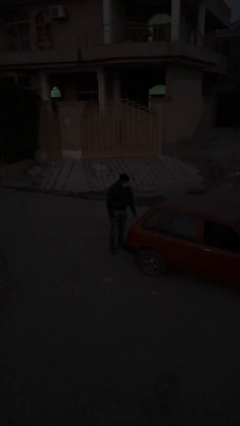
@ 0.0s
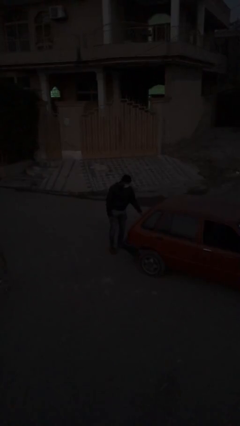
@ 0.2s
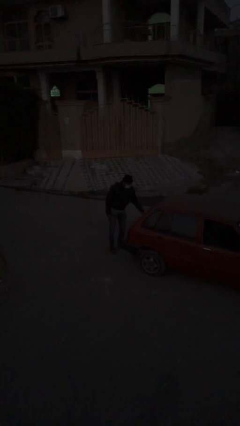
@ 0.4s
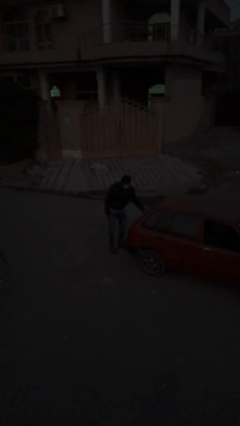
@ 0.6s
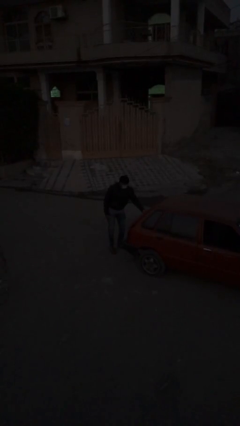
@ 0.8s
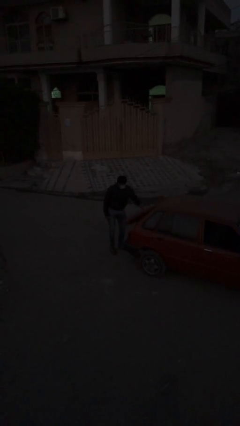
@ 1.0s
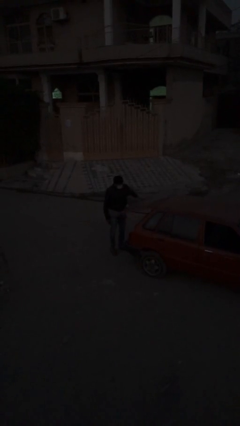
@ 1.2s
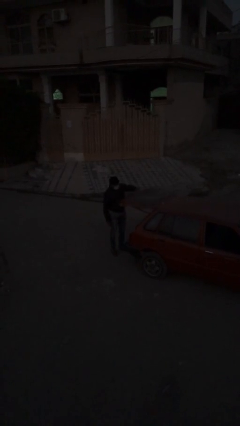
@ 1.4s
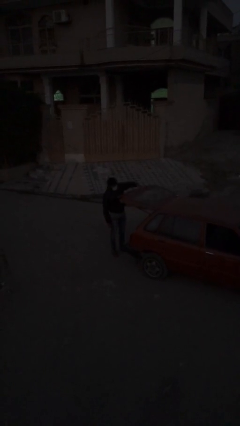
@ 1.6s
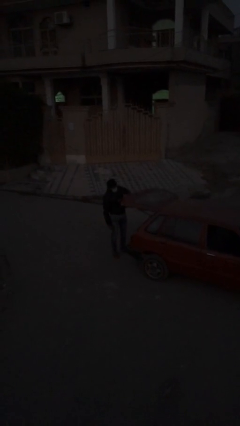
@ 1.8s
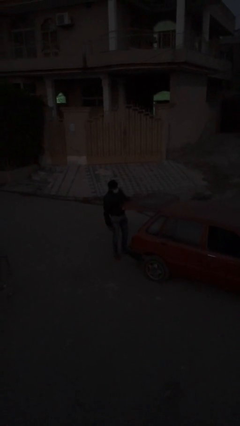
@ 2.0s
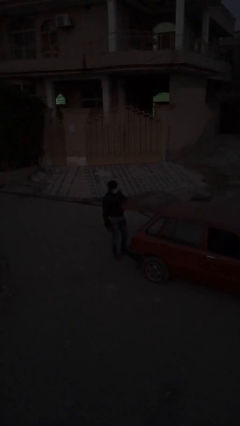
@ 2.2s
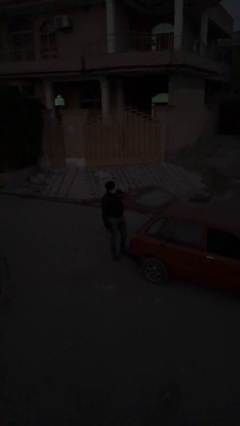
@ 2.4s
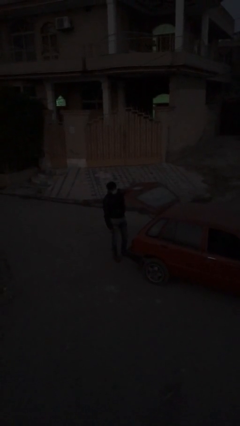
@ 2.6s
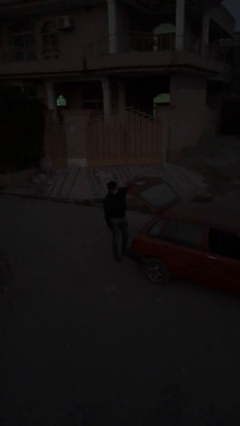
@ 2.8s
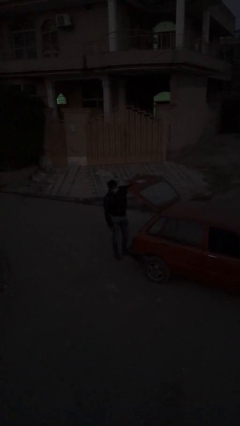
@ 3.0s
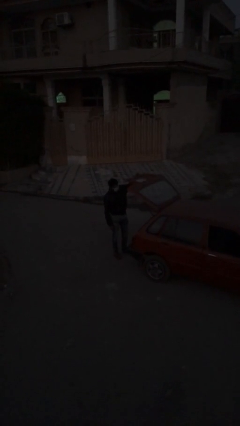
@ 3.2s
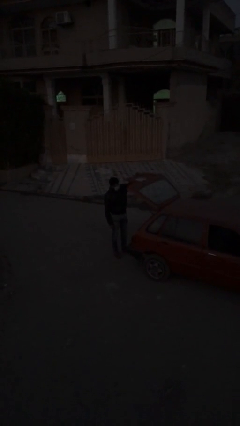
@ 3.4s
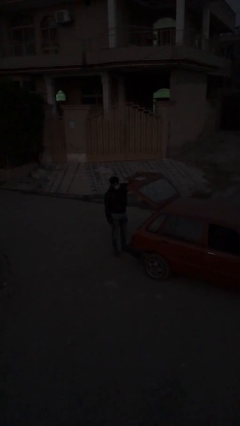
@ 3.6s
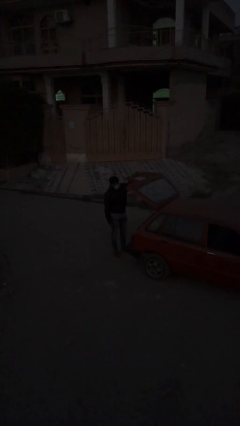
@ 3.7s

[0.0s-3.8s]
person opens car trunk

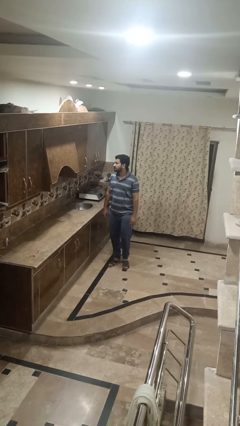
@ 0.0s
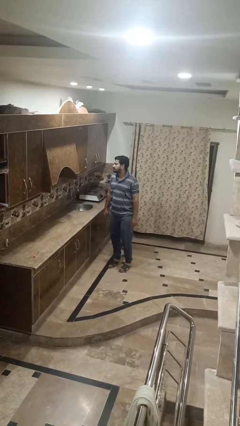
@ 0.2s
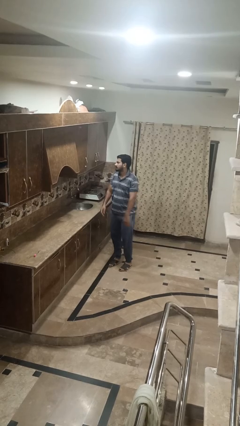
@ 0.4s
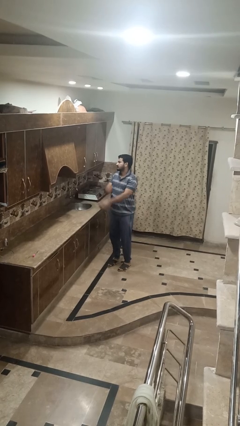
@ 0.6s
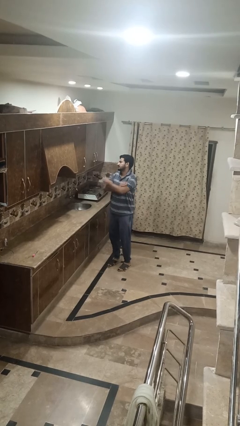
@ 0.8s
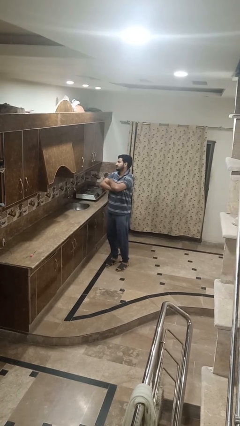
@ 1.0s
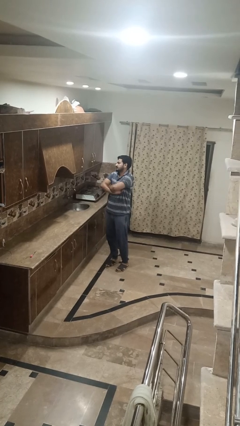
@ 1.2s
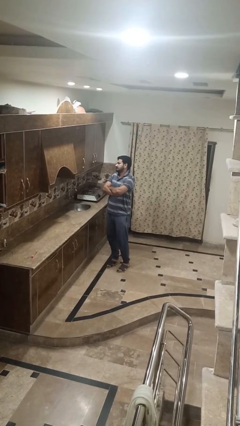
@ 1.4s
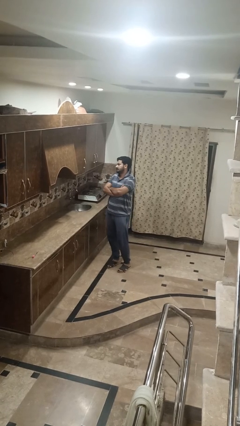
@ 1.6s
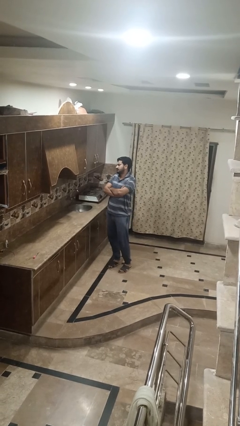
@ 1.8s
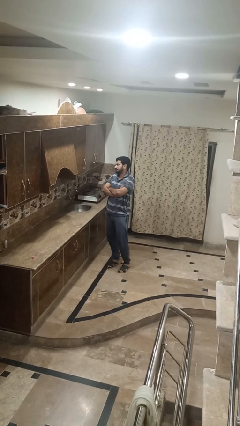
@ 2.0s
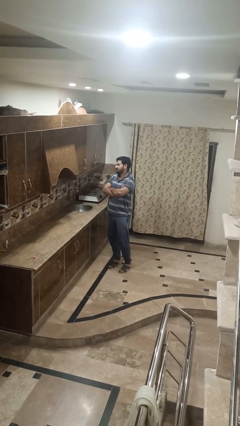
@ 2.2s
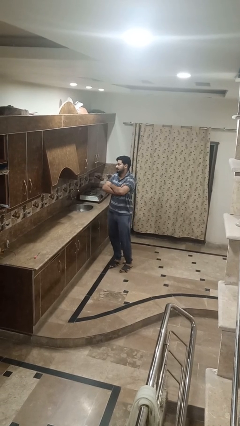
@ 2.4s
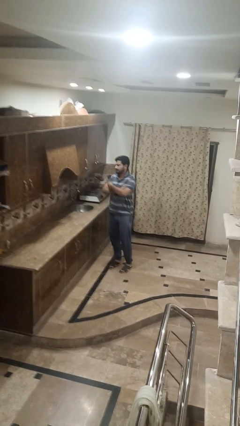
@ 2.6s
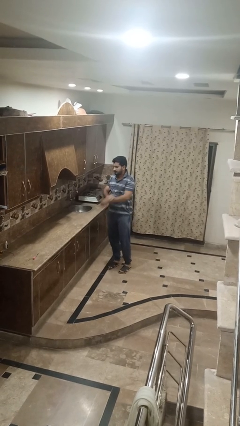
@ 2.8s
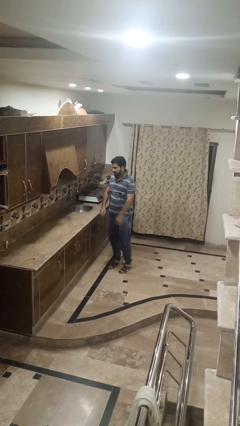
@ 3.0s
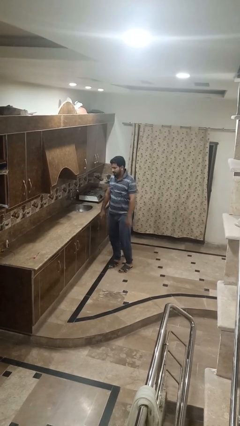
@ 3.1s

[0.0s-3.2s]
person crosses arms

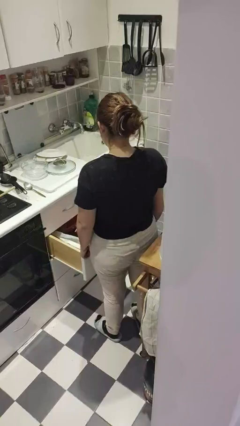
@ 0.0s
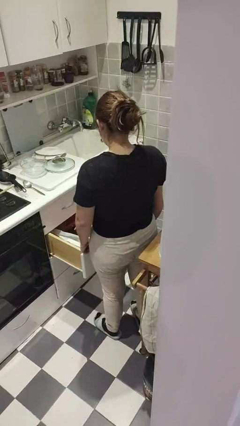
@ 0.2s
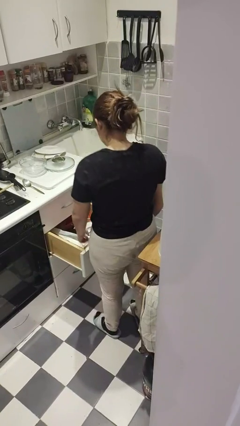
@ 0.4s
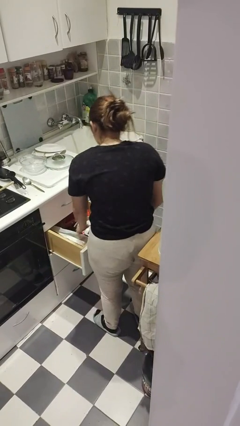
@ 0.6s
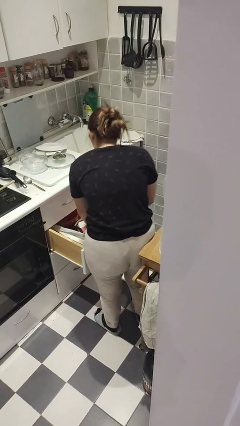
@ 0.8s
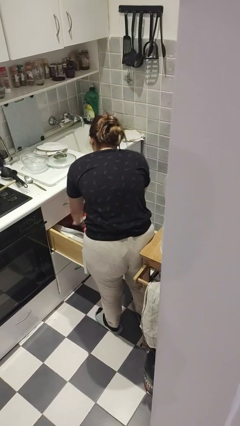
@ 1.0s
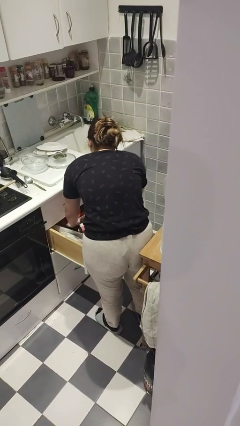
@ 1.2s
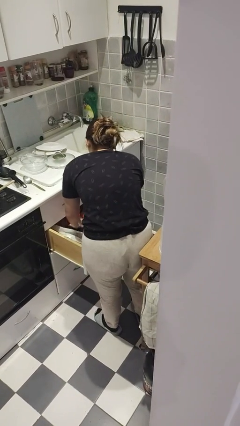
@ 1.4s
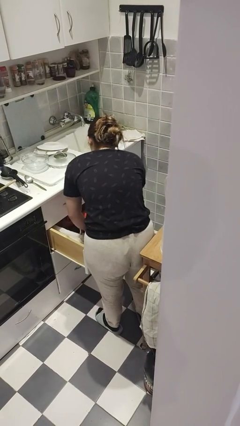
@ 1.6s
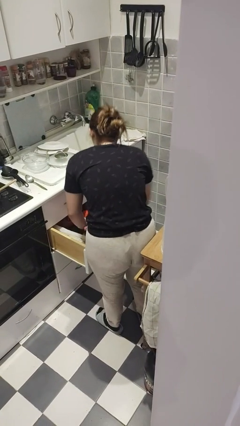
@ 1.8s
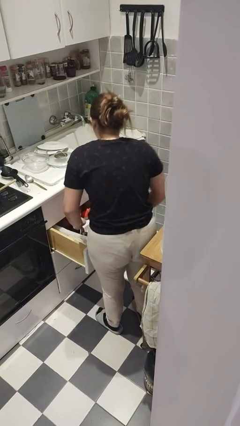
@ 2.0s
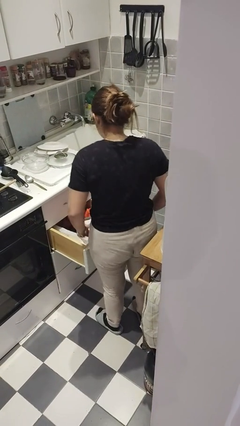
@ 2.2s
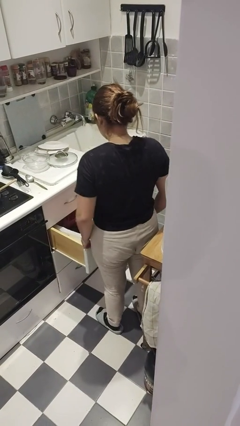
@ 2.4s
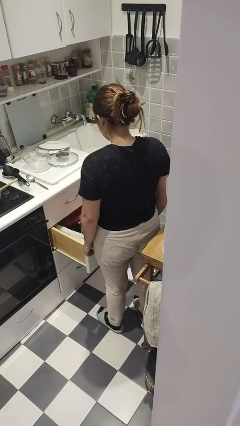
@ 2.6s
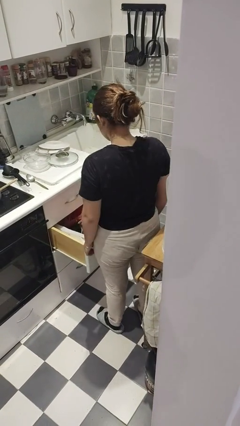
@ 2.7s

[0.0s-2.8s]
person searches in kitchen drawer

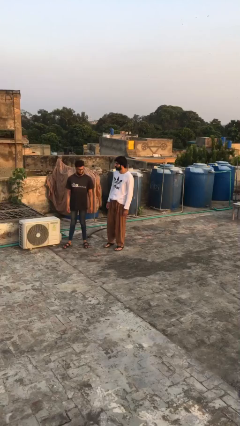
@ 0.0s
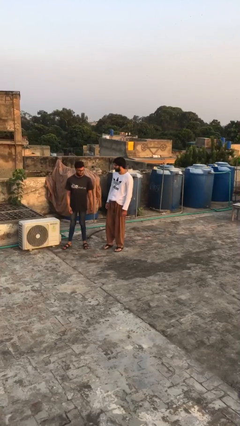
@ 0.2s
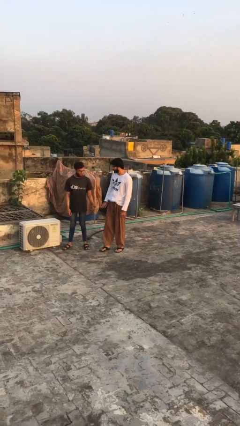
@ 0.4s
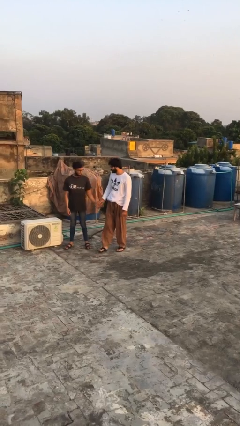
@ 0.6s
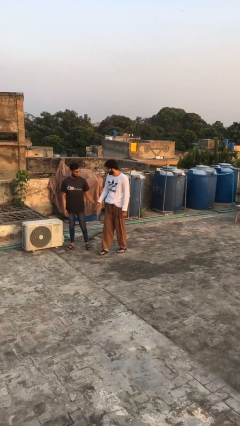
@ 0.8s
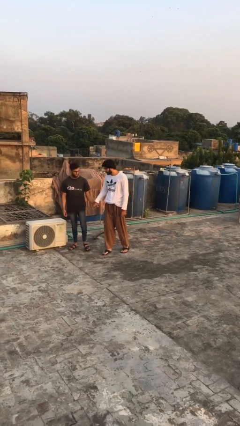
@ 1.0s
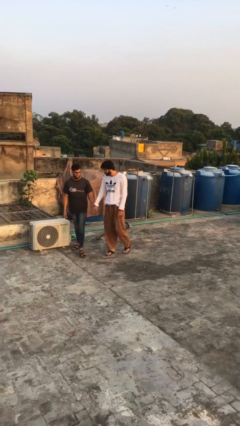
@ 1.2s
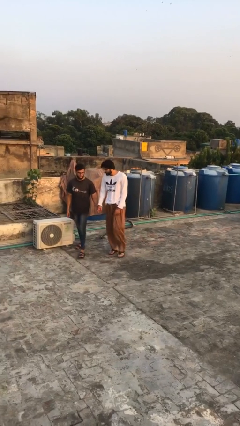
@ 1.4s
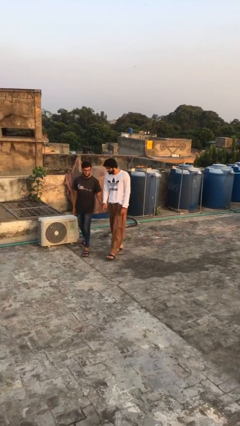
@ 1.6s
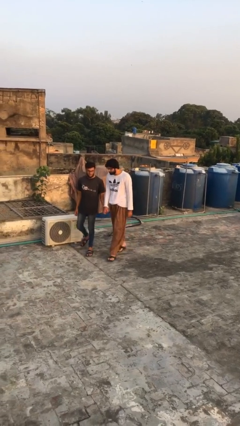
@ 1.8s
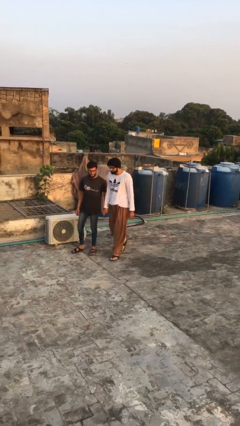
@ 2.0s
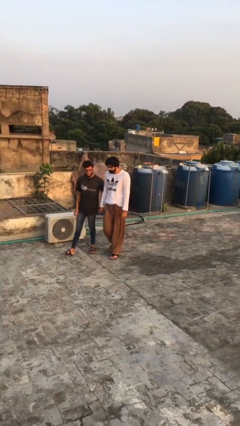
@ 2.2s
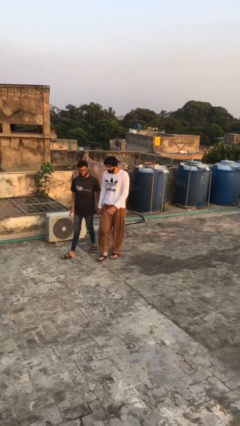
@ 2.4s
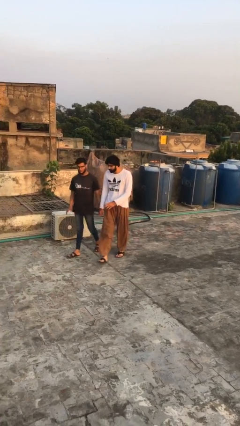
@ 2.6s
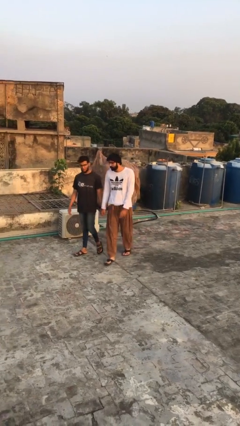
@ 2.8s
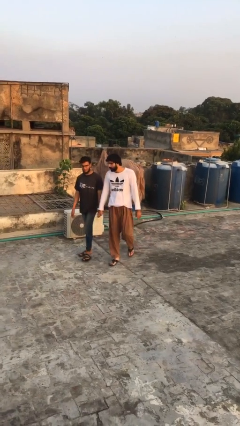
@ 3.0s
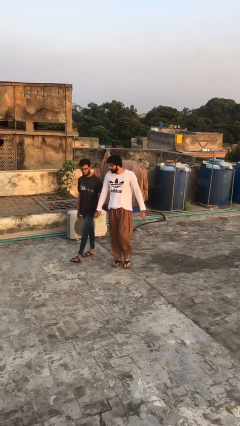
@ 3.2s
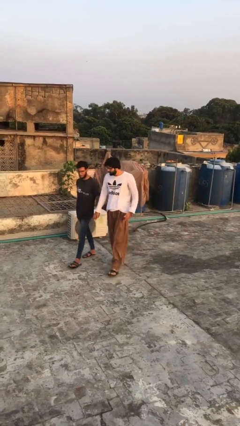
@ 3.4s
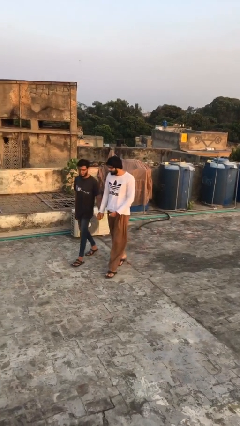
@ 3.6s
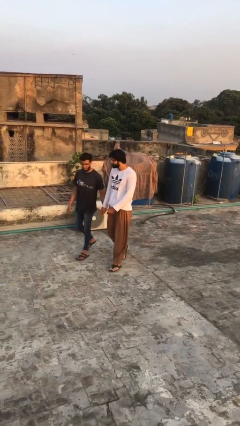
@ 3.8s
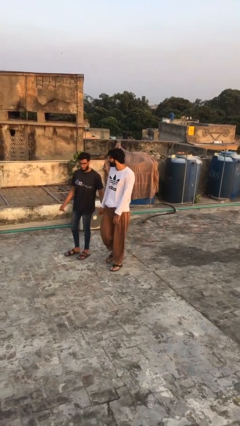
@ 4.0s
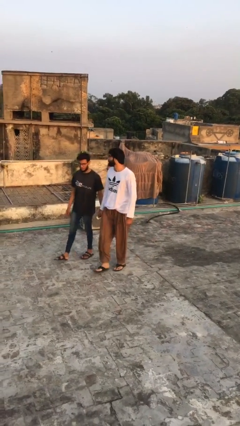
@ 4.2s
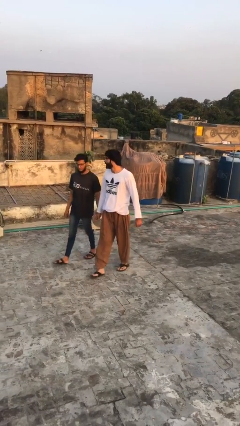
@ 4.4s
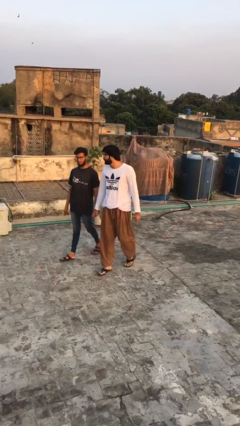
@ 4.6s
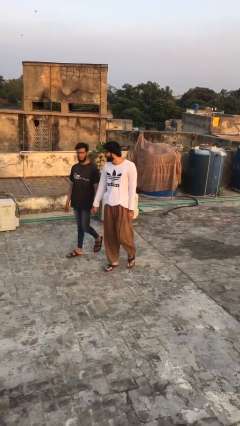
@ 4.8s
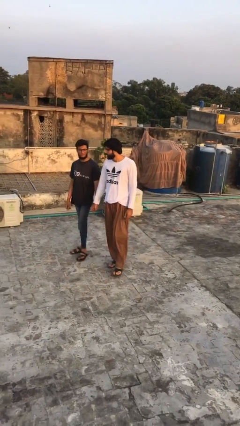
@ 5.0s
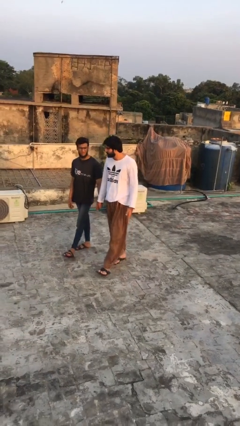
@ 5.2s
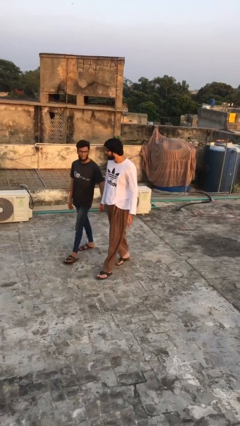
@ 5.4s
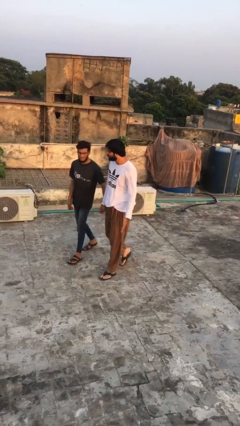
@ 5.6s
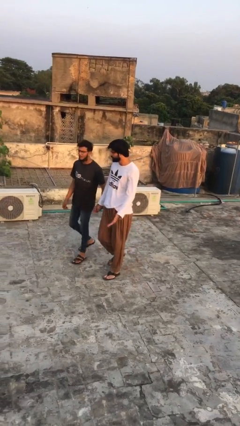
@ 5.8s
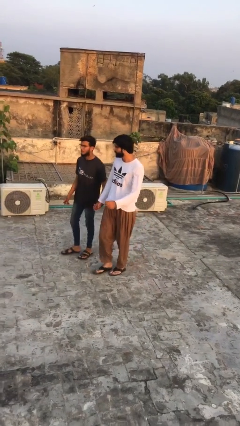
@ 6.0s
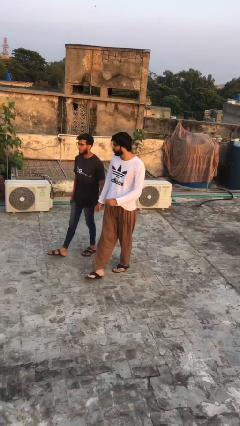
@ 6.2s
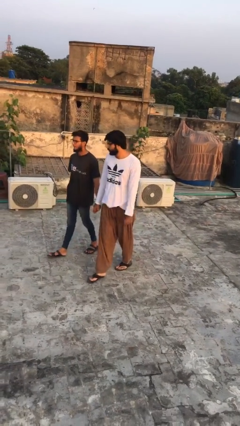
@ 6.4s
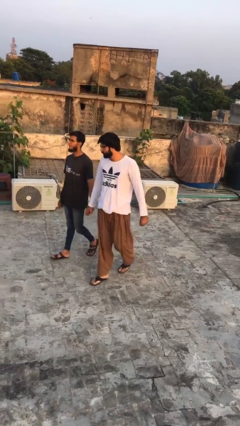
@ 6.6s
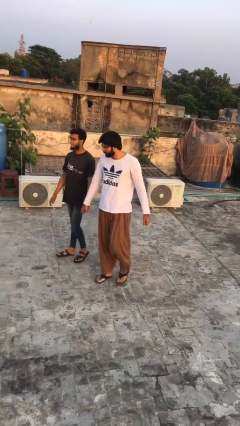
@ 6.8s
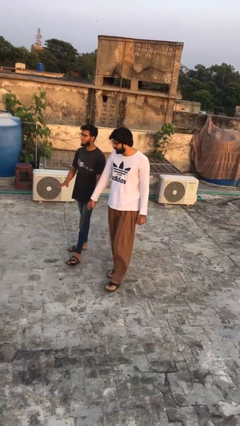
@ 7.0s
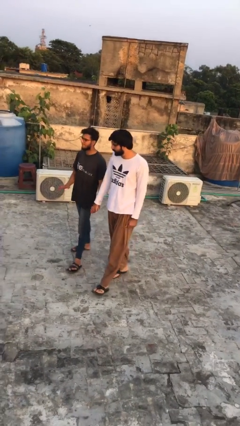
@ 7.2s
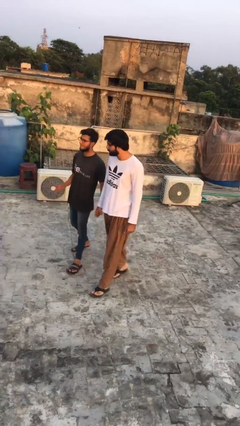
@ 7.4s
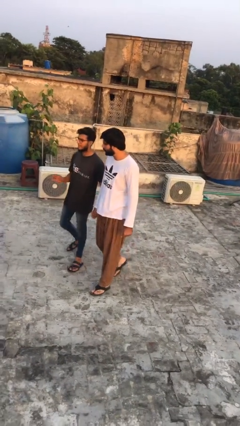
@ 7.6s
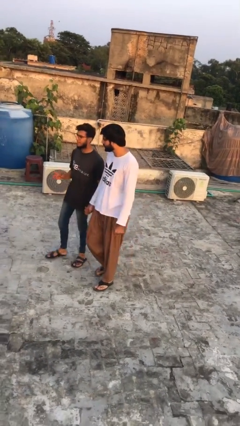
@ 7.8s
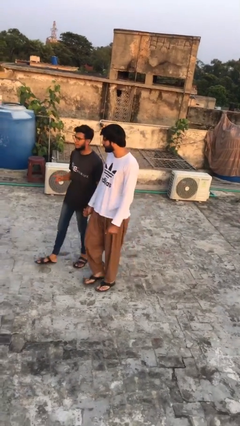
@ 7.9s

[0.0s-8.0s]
person holds hand

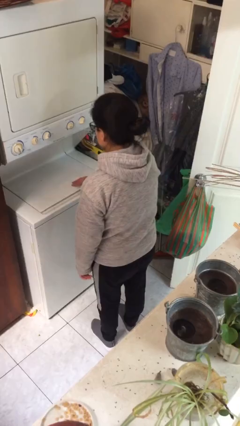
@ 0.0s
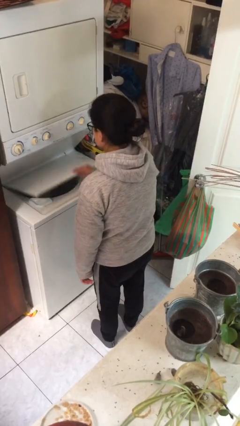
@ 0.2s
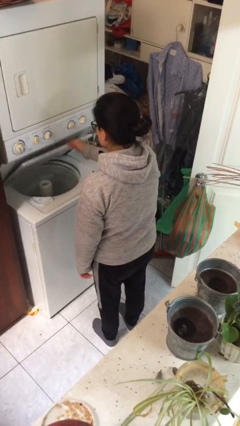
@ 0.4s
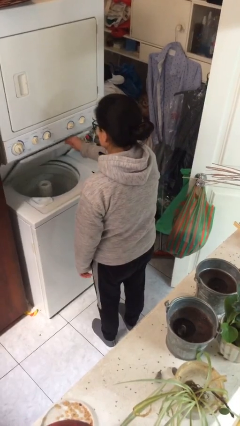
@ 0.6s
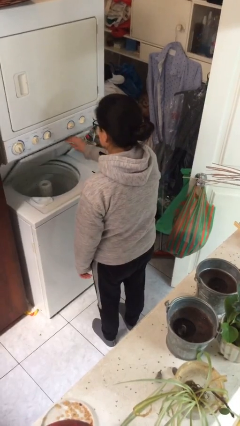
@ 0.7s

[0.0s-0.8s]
person opens clothes washer
